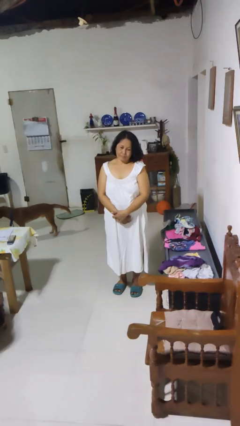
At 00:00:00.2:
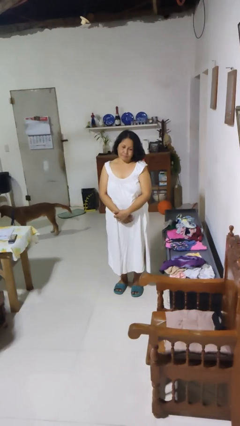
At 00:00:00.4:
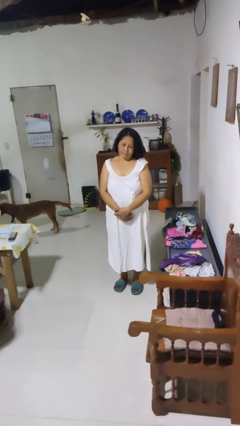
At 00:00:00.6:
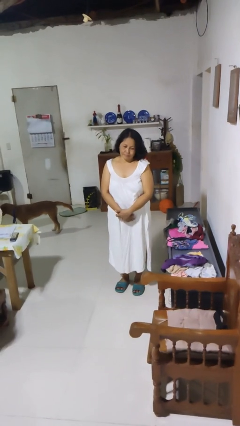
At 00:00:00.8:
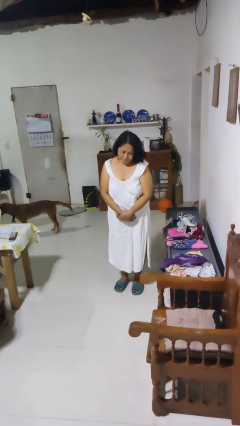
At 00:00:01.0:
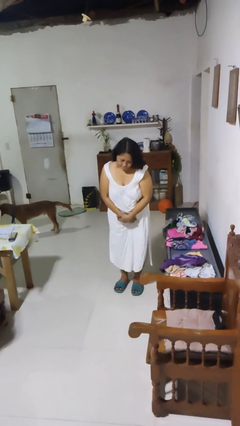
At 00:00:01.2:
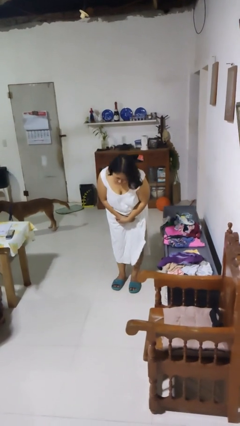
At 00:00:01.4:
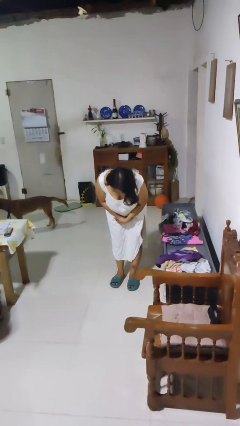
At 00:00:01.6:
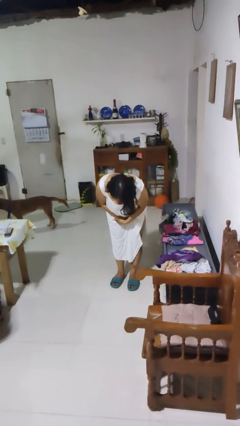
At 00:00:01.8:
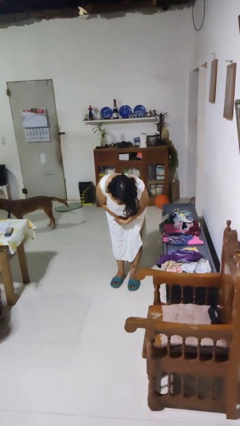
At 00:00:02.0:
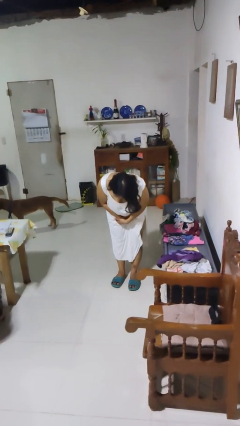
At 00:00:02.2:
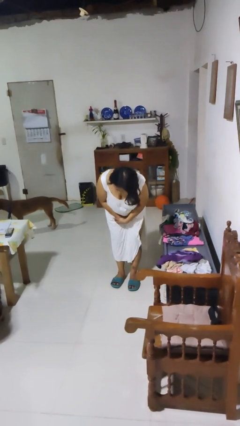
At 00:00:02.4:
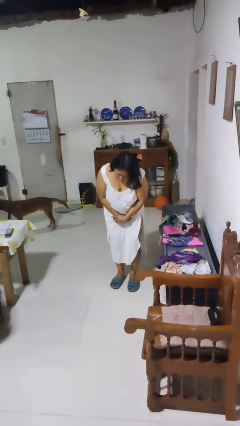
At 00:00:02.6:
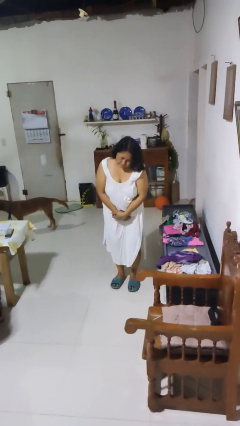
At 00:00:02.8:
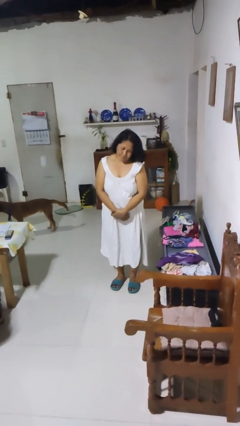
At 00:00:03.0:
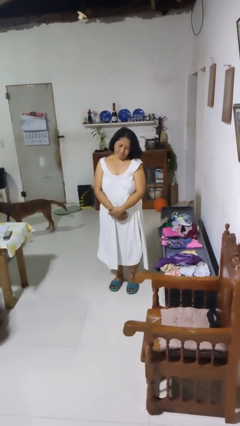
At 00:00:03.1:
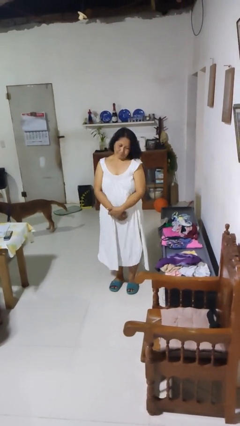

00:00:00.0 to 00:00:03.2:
person bows

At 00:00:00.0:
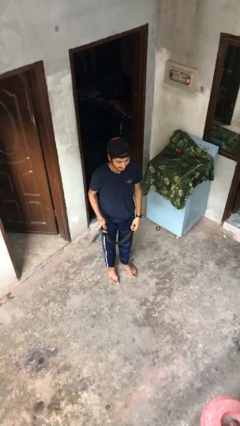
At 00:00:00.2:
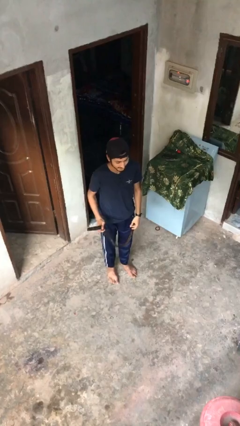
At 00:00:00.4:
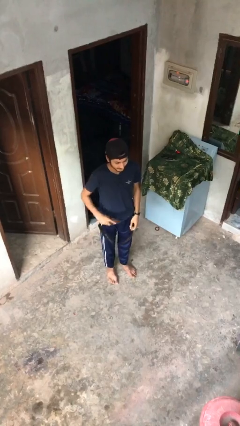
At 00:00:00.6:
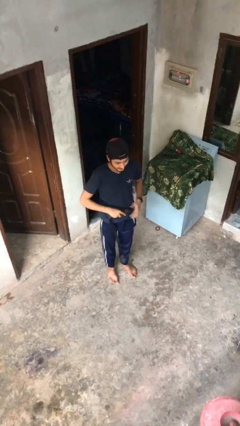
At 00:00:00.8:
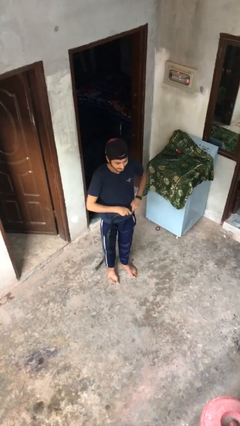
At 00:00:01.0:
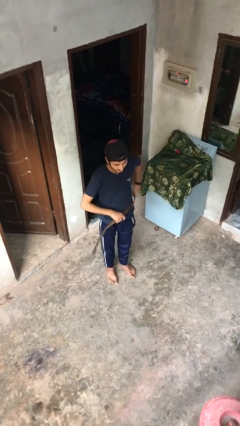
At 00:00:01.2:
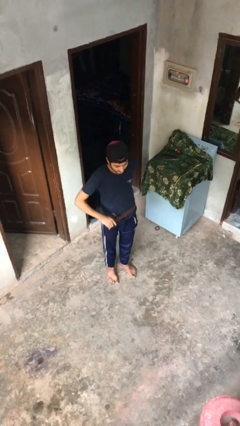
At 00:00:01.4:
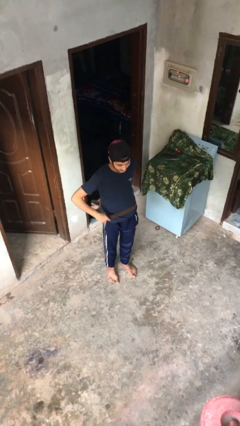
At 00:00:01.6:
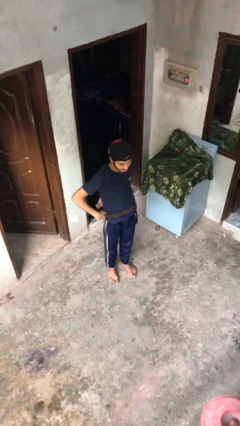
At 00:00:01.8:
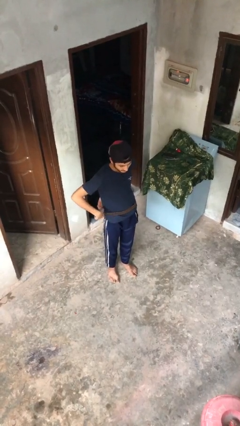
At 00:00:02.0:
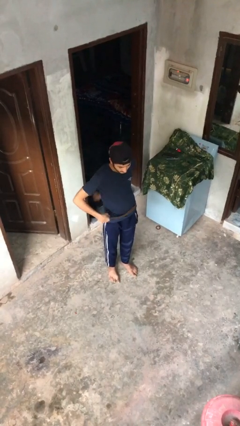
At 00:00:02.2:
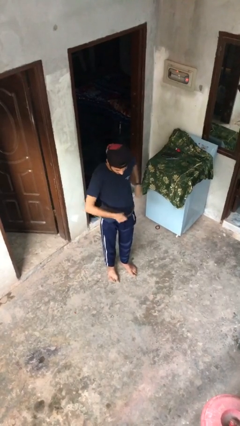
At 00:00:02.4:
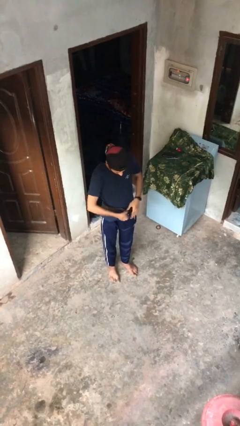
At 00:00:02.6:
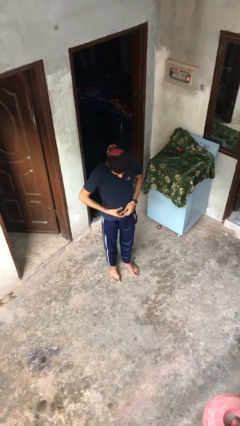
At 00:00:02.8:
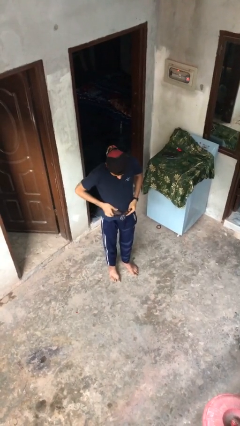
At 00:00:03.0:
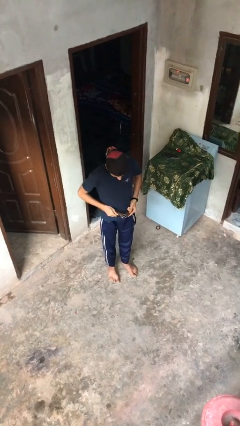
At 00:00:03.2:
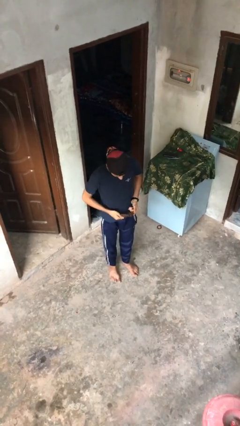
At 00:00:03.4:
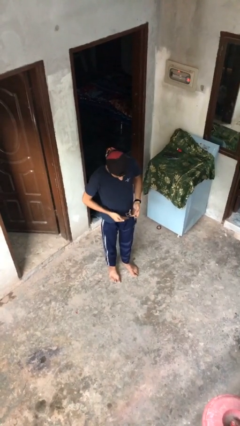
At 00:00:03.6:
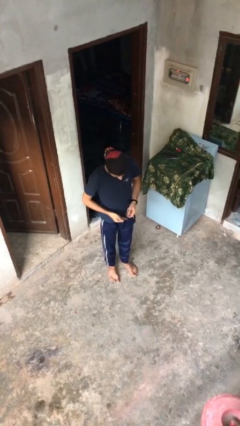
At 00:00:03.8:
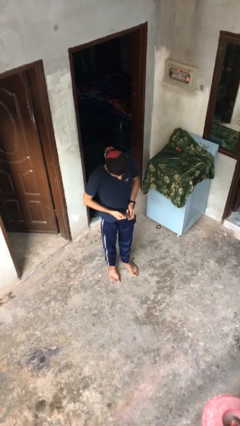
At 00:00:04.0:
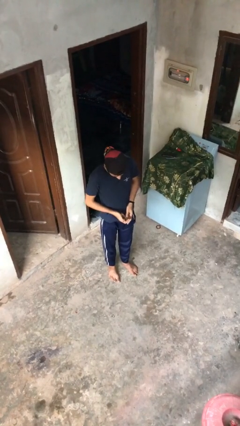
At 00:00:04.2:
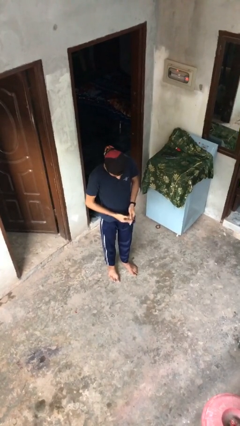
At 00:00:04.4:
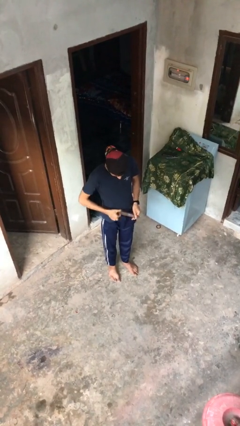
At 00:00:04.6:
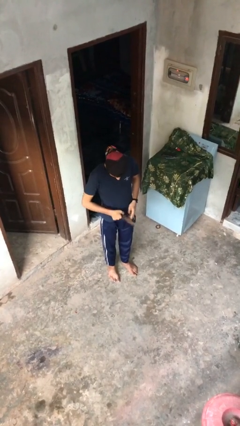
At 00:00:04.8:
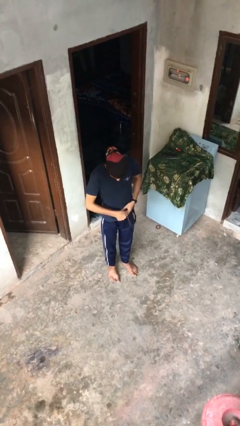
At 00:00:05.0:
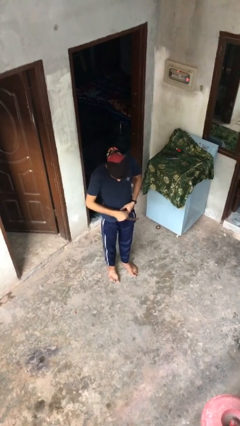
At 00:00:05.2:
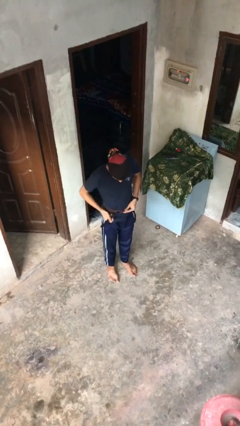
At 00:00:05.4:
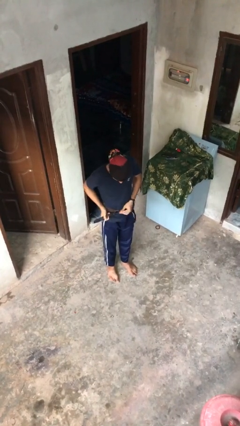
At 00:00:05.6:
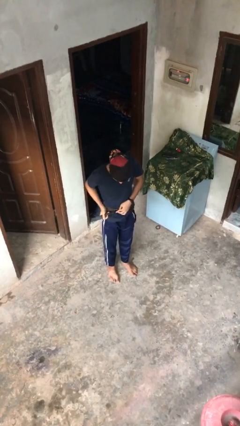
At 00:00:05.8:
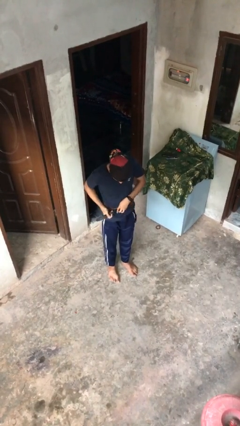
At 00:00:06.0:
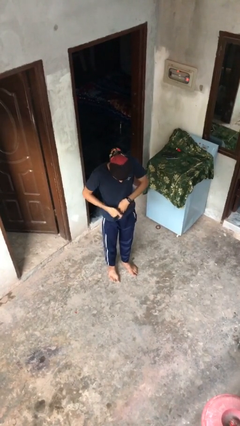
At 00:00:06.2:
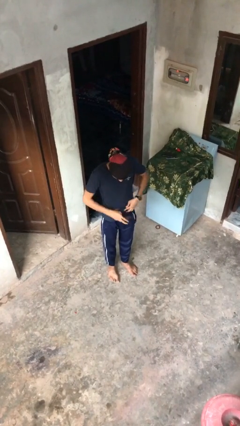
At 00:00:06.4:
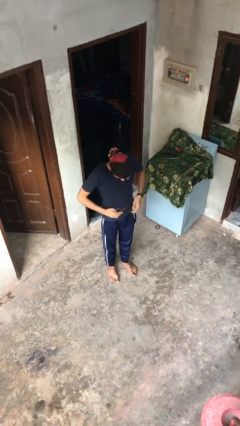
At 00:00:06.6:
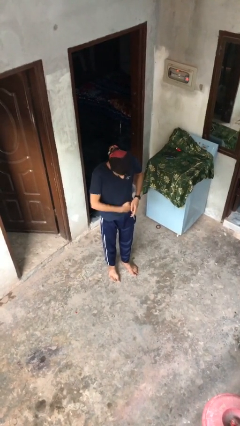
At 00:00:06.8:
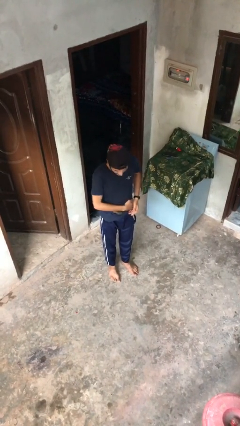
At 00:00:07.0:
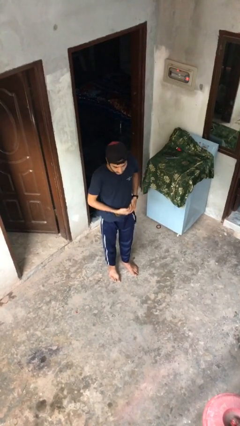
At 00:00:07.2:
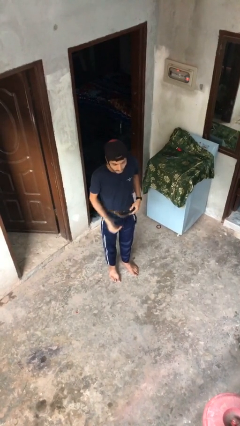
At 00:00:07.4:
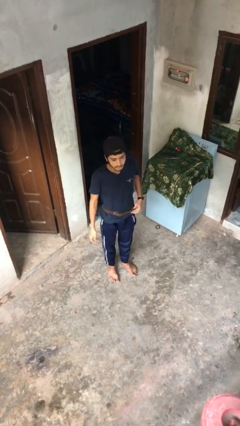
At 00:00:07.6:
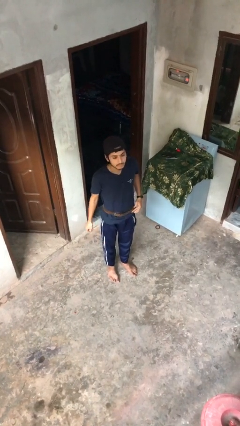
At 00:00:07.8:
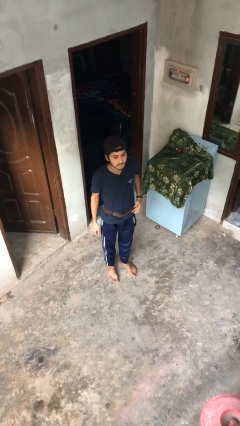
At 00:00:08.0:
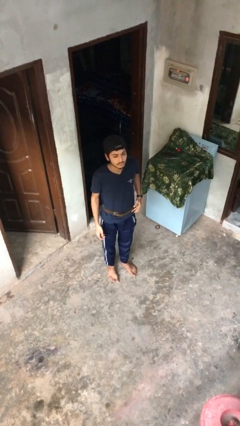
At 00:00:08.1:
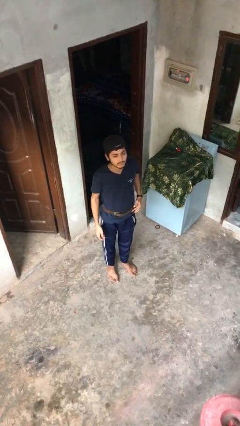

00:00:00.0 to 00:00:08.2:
person puts on belt

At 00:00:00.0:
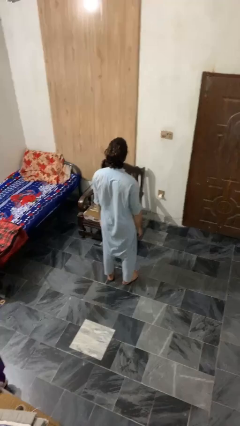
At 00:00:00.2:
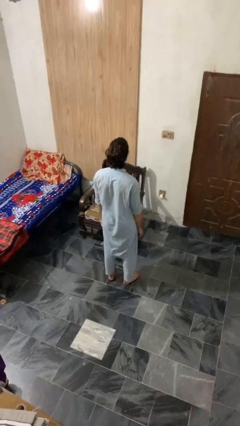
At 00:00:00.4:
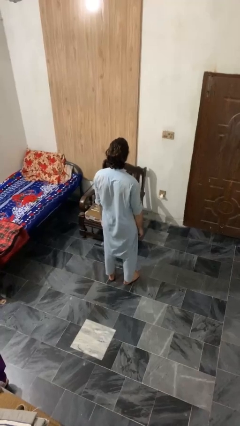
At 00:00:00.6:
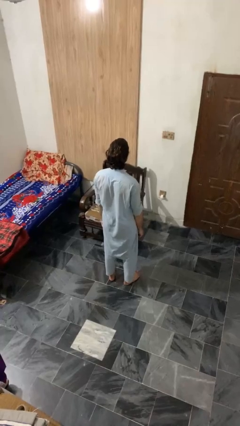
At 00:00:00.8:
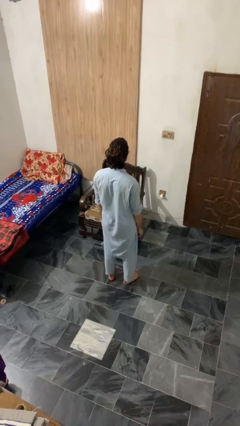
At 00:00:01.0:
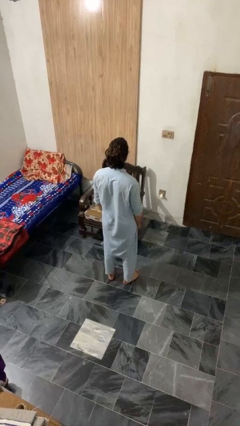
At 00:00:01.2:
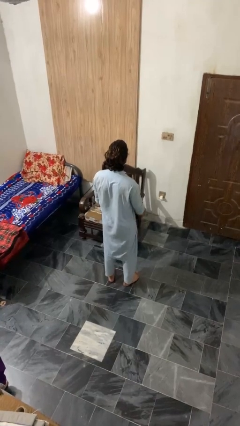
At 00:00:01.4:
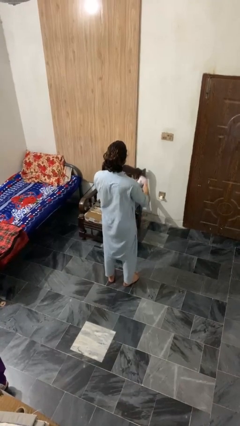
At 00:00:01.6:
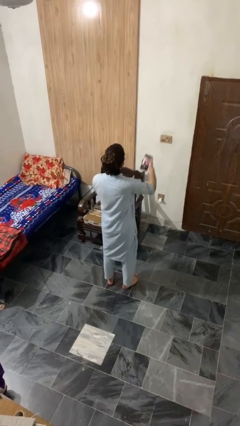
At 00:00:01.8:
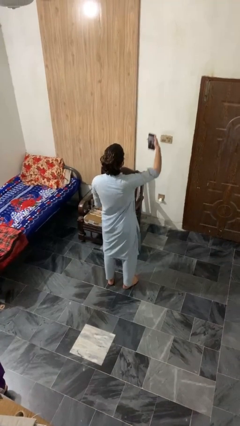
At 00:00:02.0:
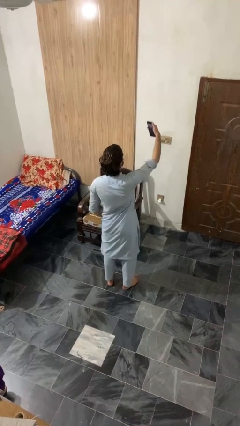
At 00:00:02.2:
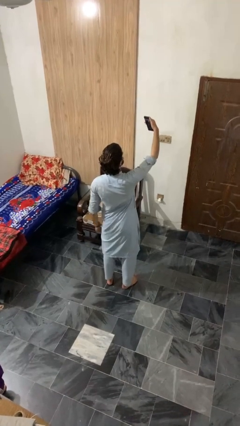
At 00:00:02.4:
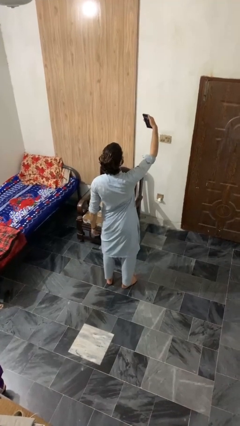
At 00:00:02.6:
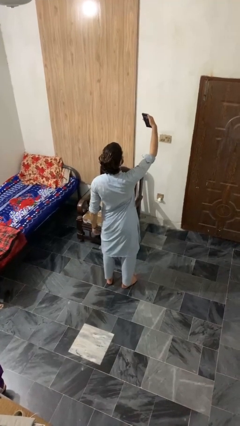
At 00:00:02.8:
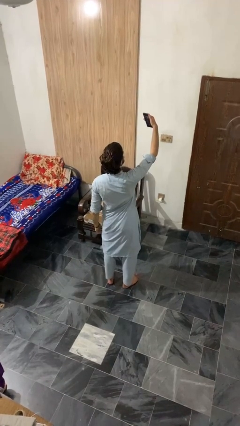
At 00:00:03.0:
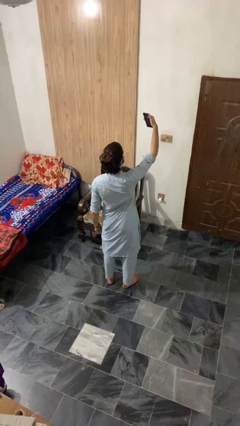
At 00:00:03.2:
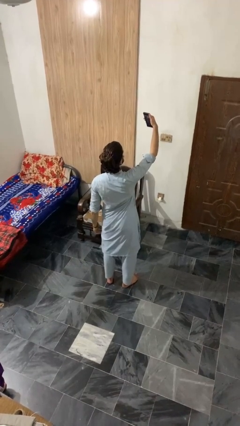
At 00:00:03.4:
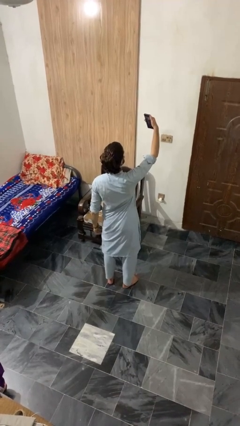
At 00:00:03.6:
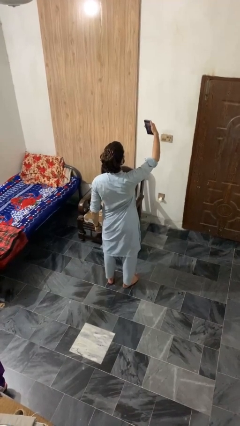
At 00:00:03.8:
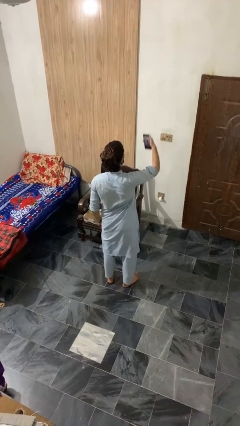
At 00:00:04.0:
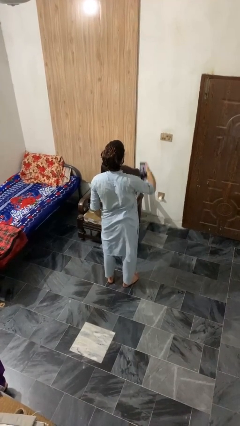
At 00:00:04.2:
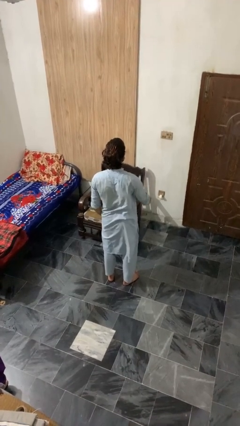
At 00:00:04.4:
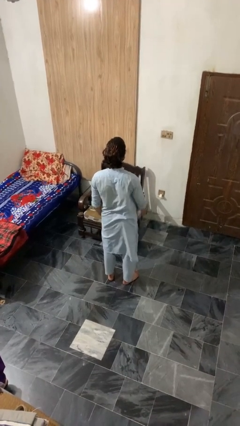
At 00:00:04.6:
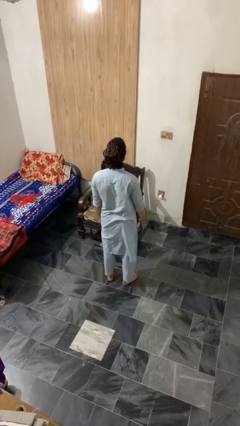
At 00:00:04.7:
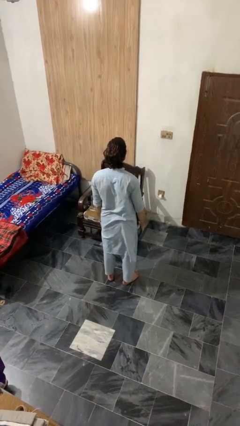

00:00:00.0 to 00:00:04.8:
person takes selfie

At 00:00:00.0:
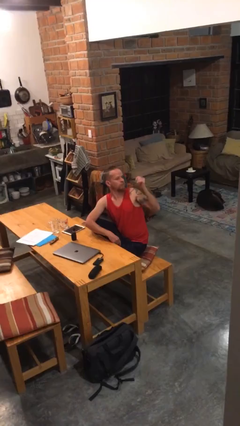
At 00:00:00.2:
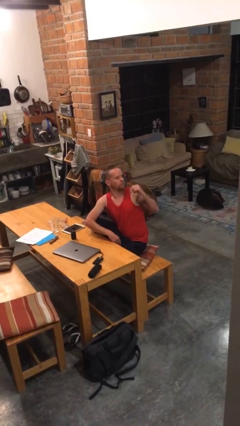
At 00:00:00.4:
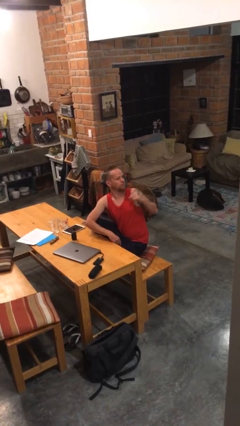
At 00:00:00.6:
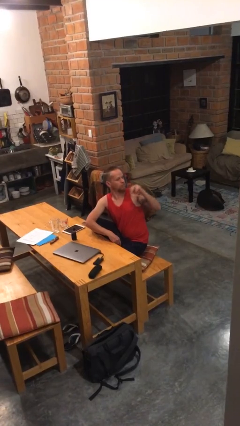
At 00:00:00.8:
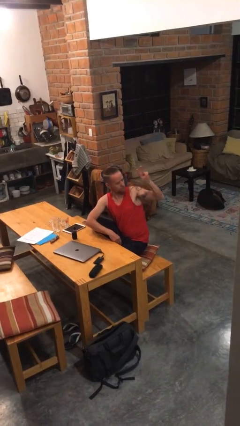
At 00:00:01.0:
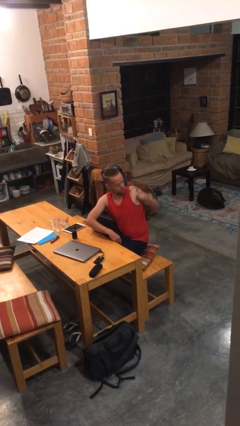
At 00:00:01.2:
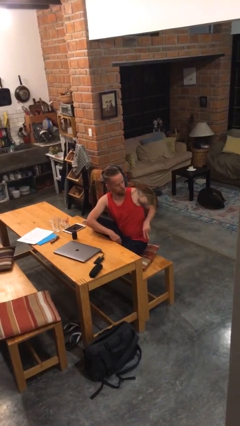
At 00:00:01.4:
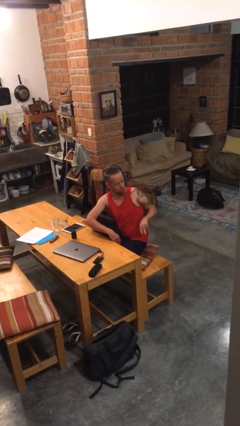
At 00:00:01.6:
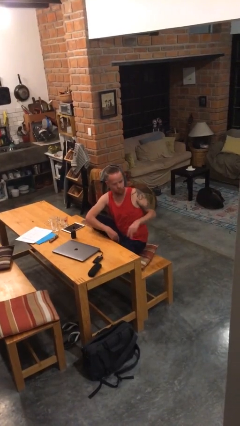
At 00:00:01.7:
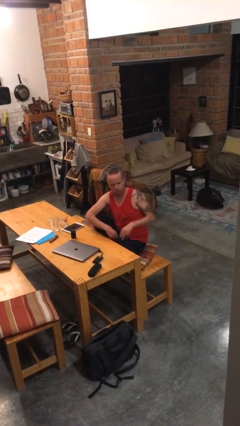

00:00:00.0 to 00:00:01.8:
person gestures swipe down
